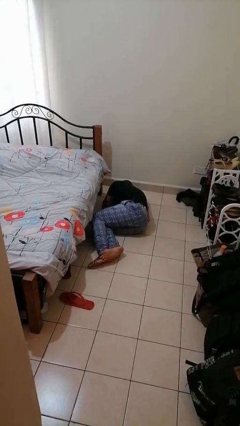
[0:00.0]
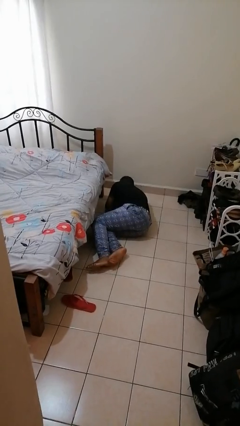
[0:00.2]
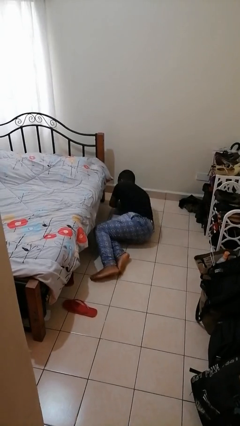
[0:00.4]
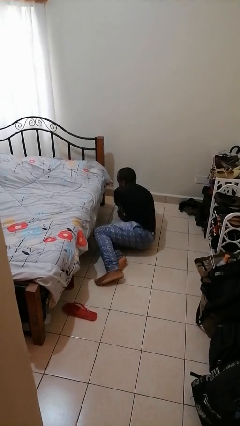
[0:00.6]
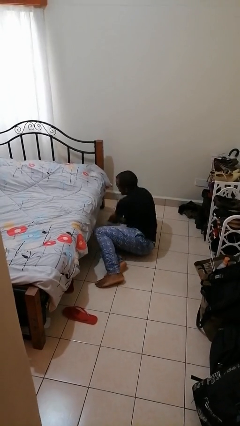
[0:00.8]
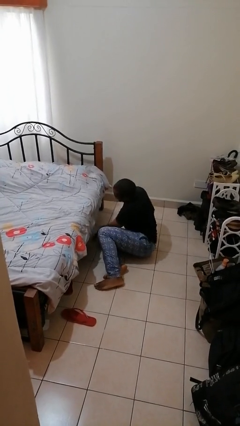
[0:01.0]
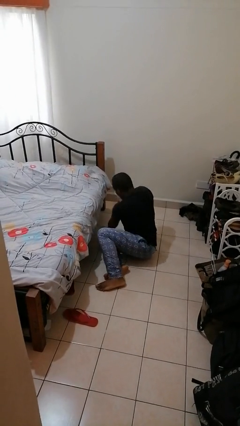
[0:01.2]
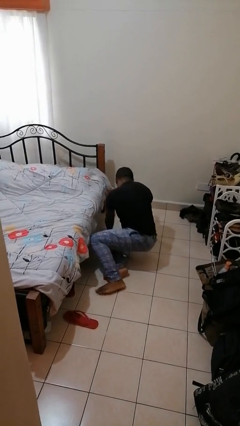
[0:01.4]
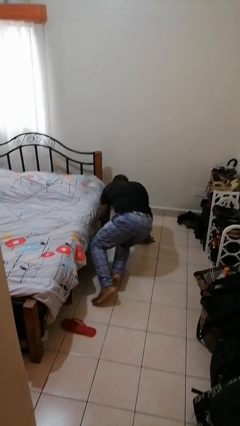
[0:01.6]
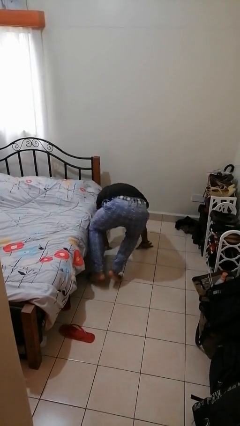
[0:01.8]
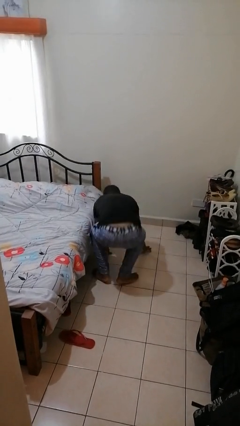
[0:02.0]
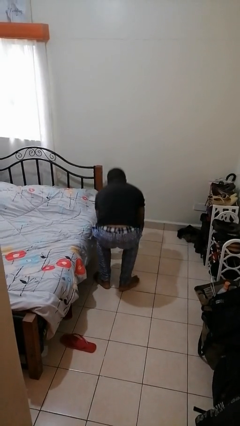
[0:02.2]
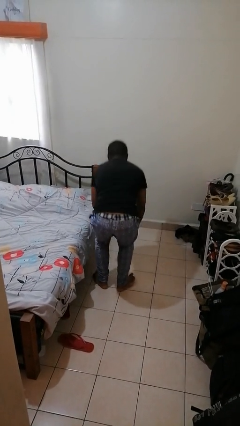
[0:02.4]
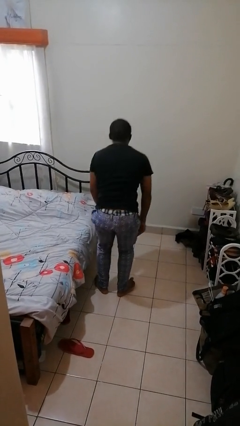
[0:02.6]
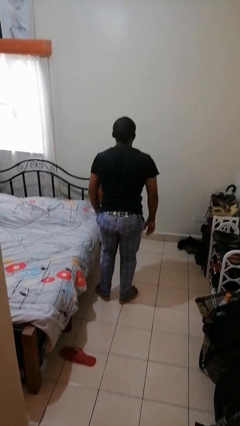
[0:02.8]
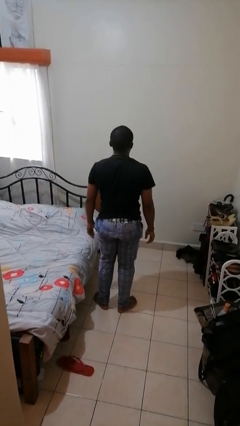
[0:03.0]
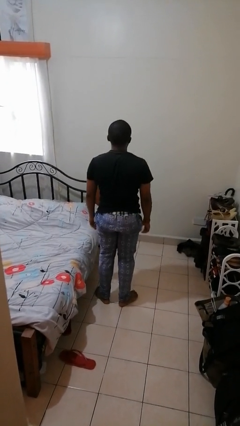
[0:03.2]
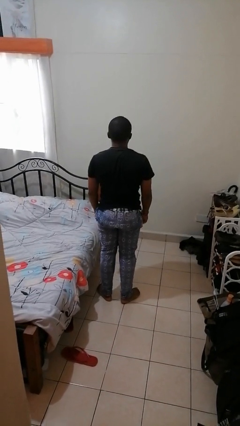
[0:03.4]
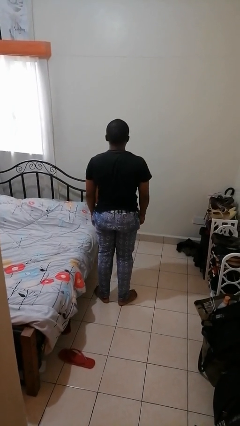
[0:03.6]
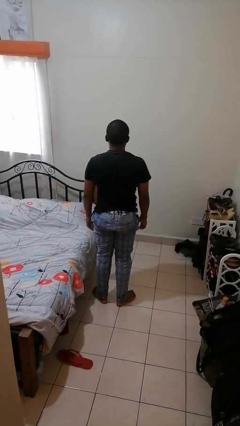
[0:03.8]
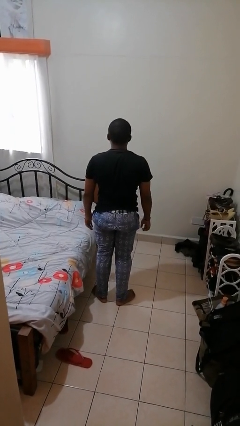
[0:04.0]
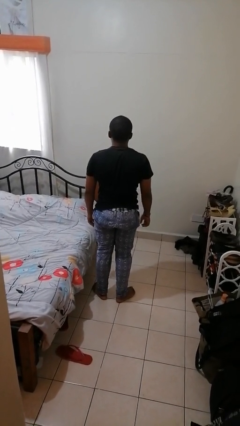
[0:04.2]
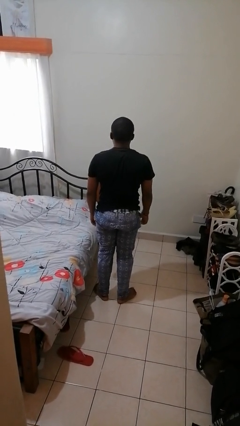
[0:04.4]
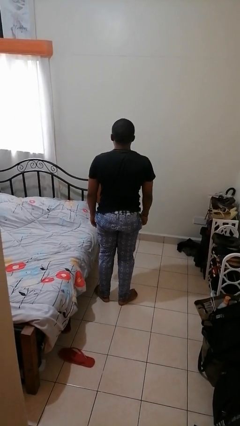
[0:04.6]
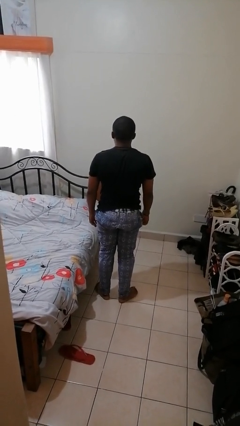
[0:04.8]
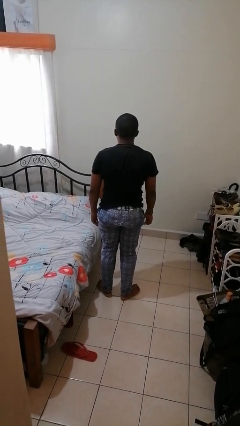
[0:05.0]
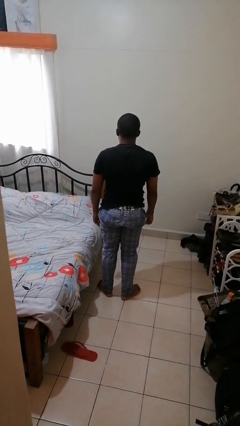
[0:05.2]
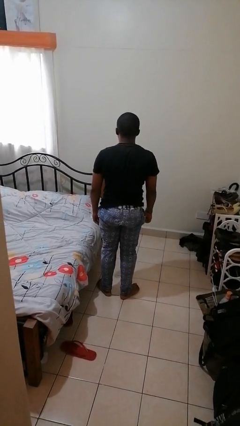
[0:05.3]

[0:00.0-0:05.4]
person stands up from floor

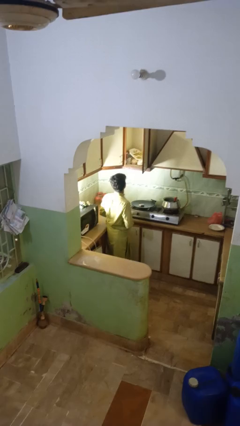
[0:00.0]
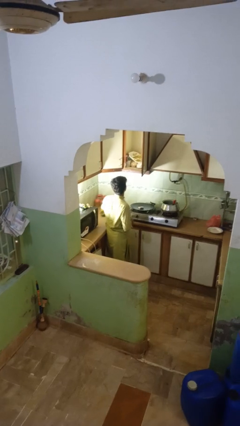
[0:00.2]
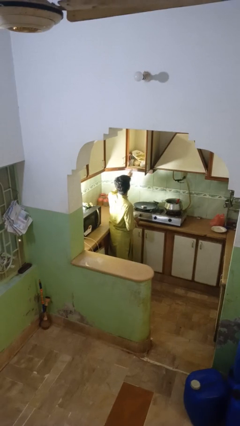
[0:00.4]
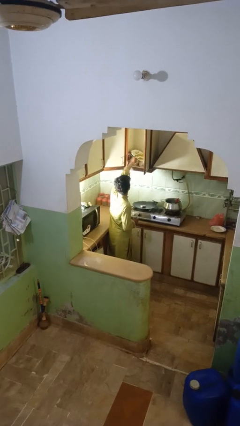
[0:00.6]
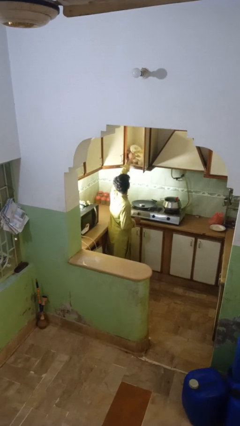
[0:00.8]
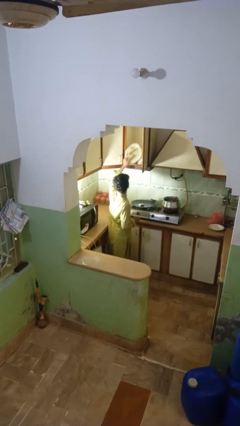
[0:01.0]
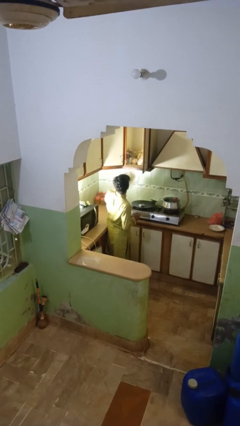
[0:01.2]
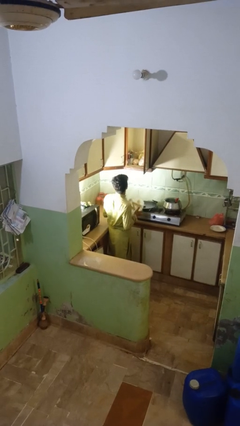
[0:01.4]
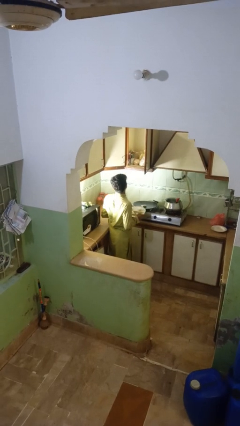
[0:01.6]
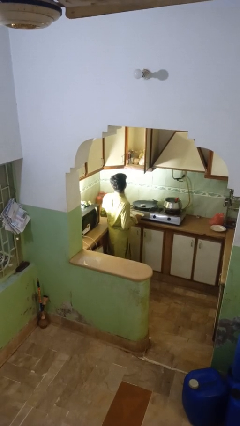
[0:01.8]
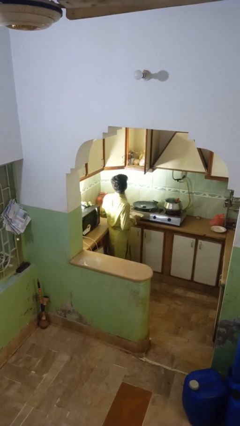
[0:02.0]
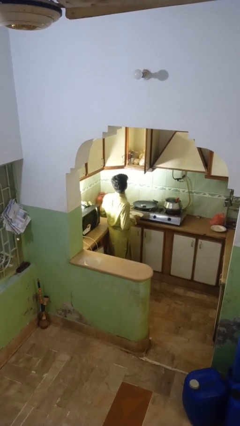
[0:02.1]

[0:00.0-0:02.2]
person takes object from cabinet

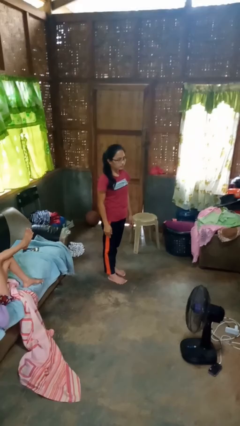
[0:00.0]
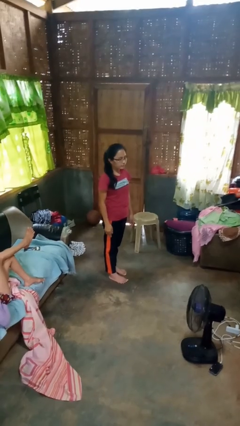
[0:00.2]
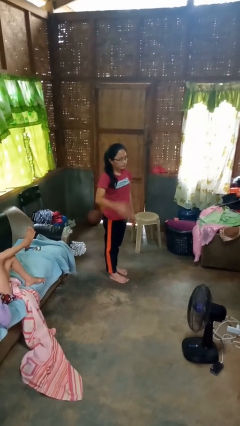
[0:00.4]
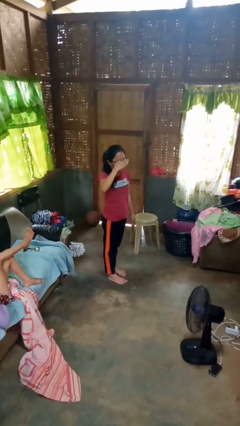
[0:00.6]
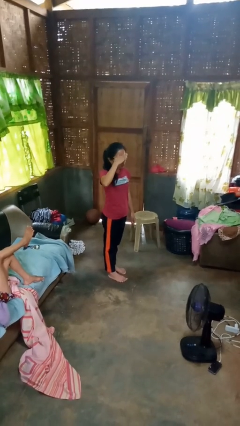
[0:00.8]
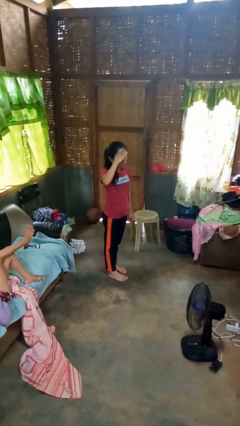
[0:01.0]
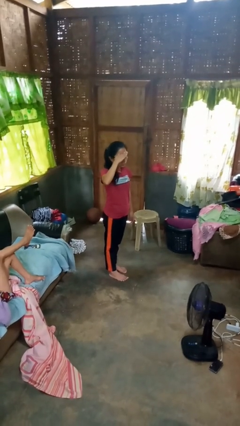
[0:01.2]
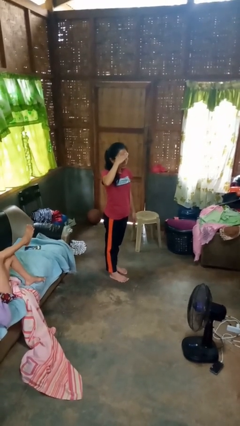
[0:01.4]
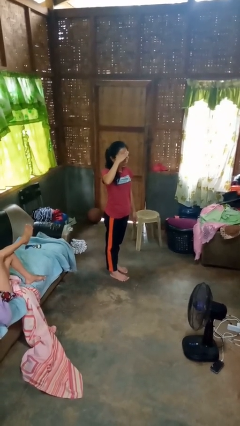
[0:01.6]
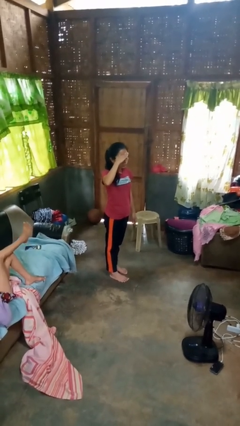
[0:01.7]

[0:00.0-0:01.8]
person salutes

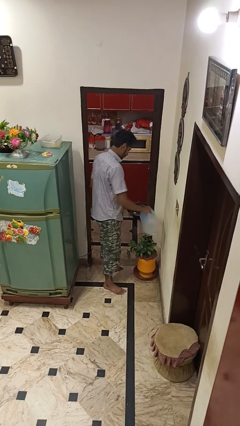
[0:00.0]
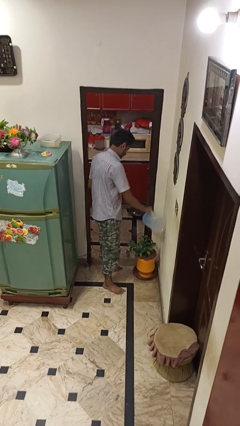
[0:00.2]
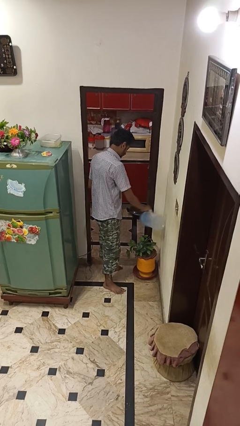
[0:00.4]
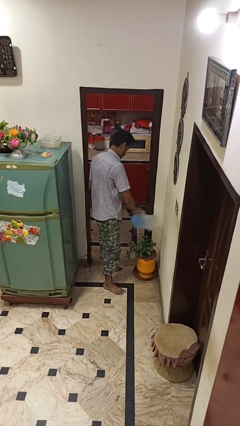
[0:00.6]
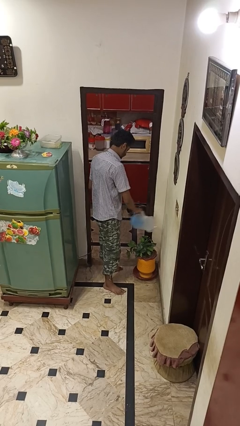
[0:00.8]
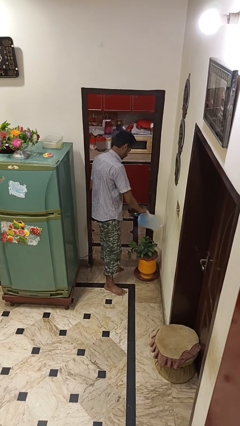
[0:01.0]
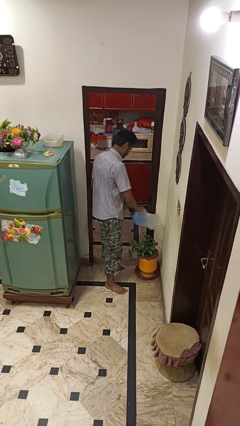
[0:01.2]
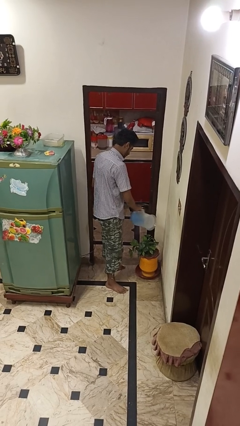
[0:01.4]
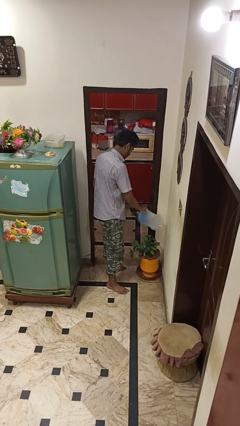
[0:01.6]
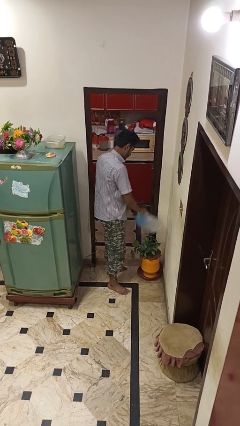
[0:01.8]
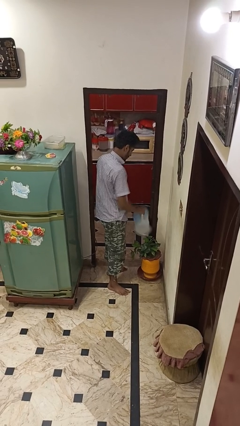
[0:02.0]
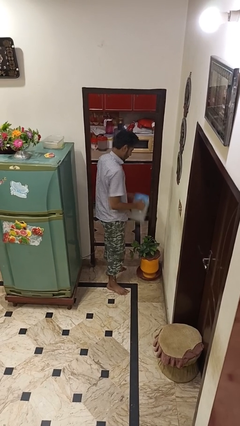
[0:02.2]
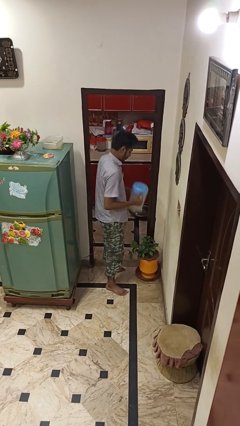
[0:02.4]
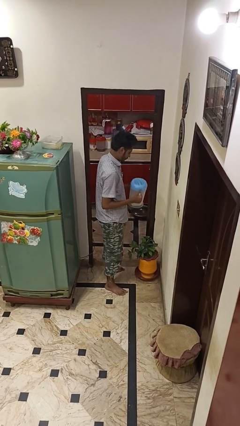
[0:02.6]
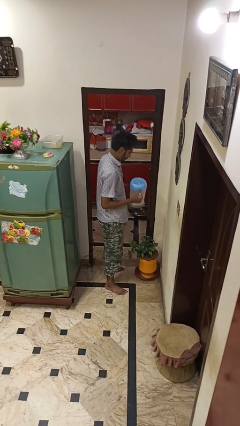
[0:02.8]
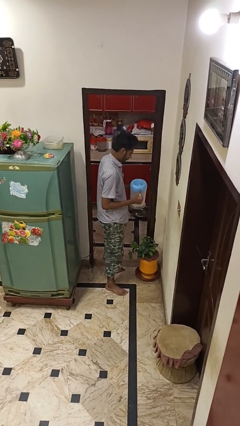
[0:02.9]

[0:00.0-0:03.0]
person waters houseplant

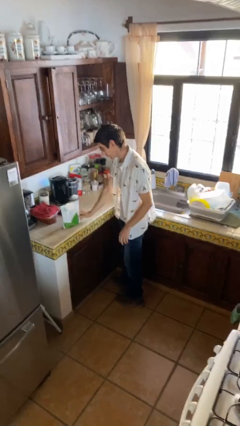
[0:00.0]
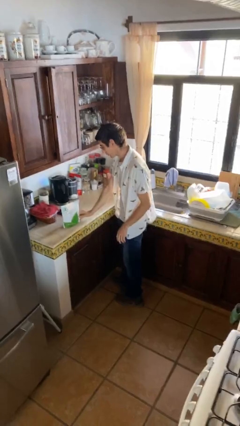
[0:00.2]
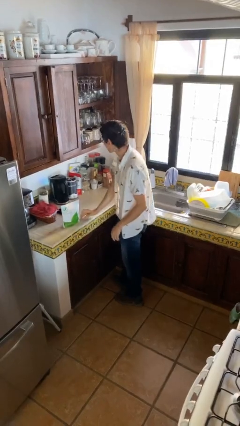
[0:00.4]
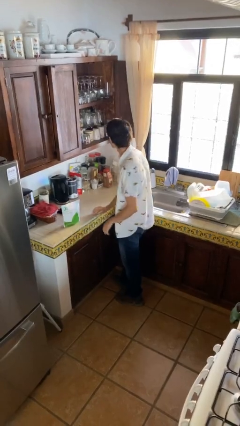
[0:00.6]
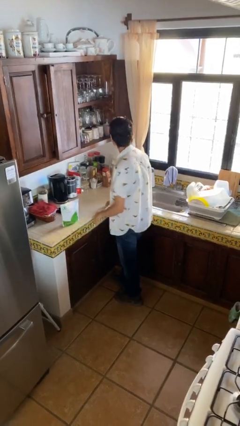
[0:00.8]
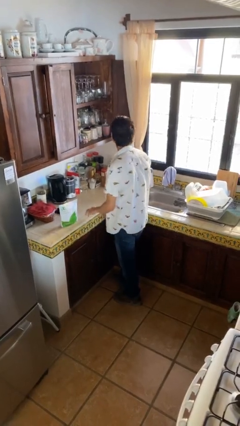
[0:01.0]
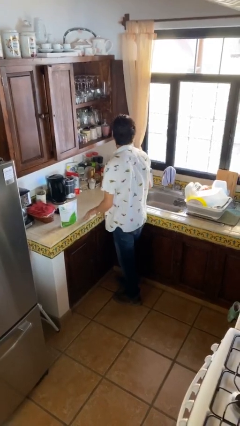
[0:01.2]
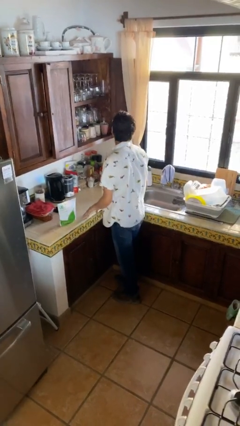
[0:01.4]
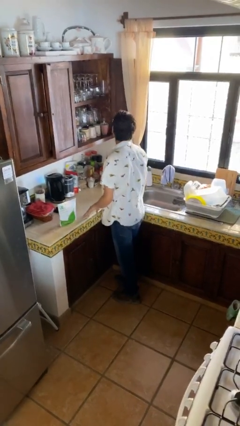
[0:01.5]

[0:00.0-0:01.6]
person puts down object on table

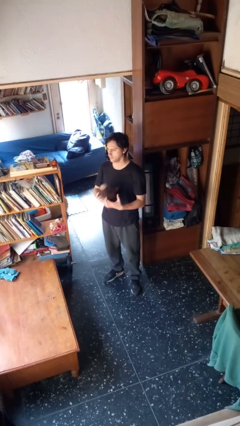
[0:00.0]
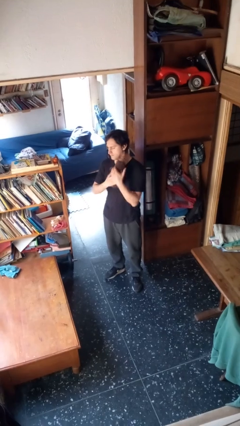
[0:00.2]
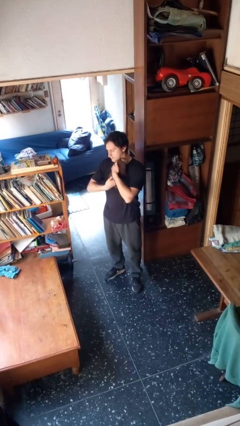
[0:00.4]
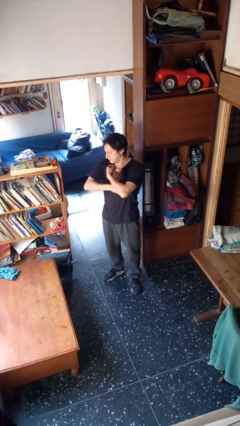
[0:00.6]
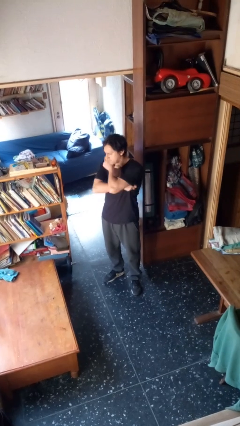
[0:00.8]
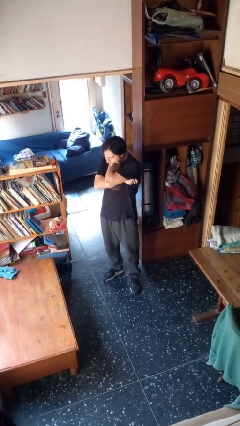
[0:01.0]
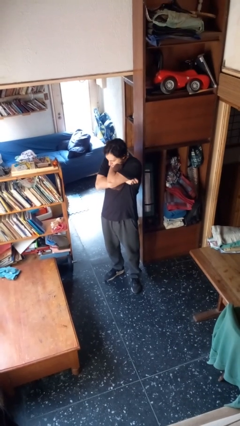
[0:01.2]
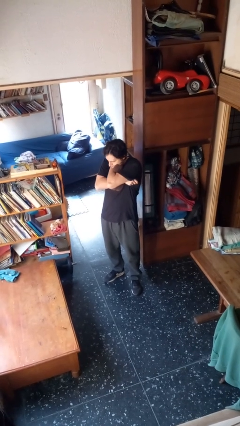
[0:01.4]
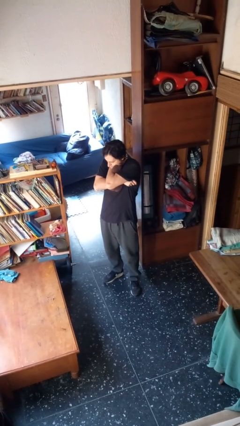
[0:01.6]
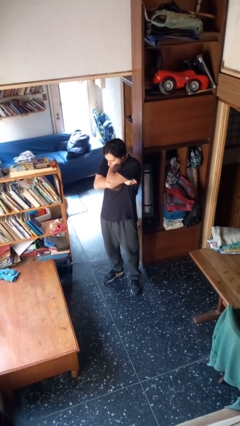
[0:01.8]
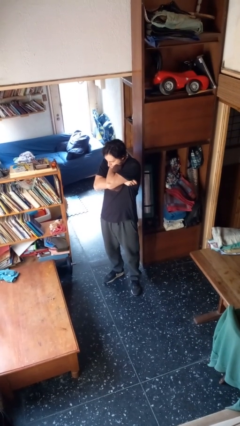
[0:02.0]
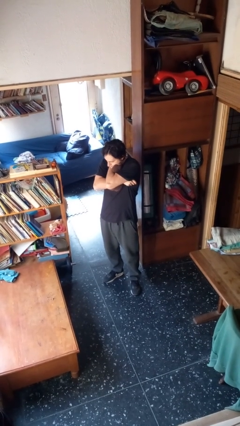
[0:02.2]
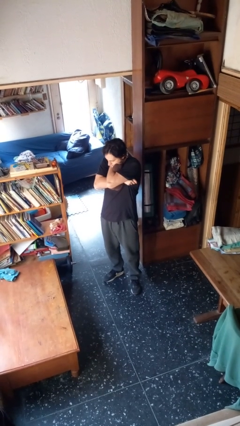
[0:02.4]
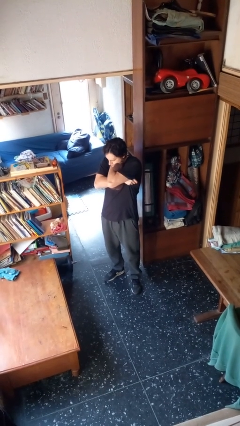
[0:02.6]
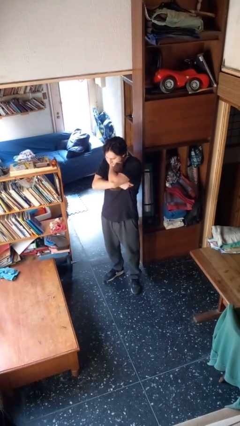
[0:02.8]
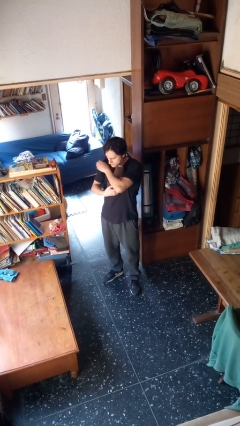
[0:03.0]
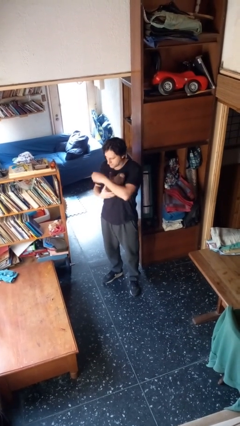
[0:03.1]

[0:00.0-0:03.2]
person hugs stuffed animal
